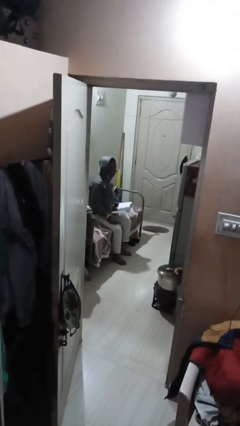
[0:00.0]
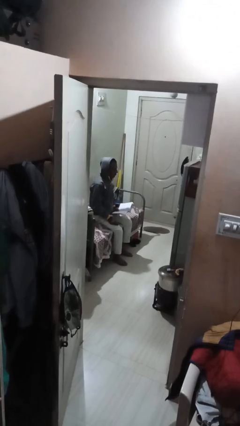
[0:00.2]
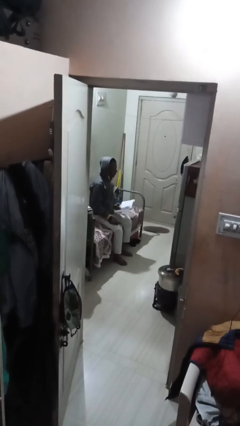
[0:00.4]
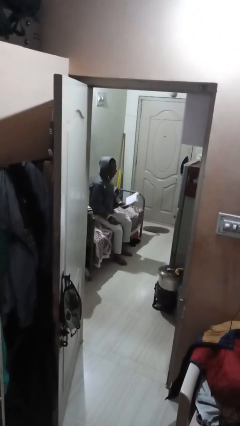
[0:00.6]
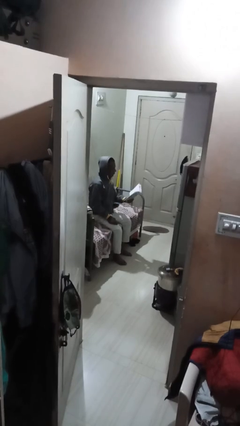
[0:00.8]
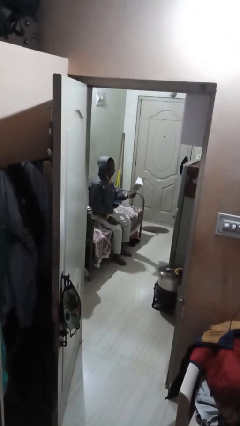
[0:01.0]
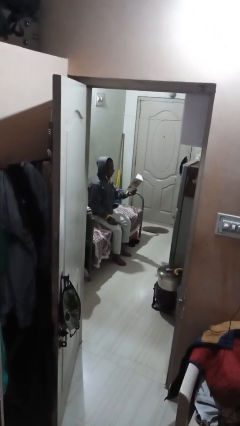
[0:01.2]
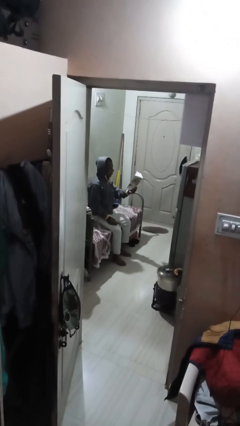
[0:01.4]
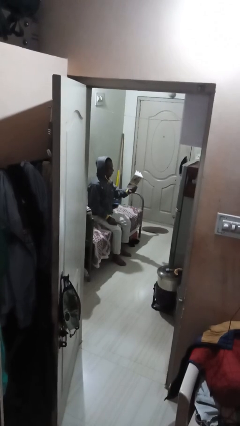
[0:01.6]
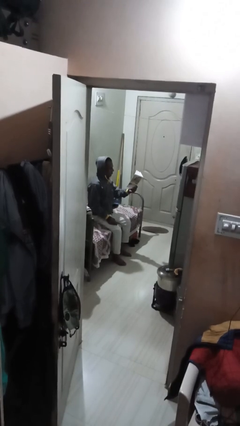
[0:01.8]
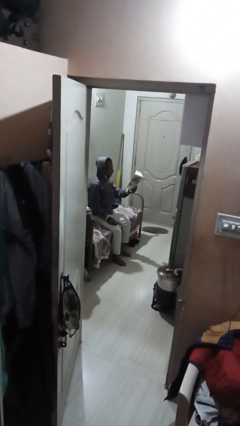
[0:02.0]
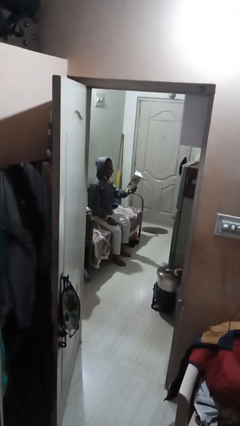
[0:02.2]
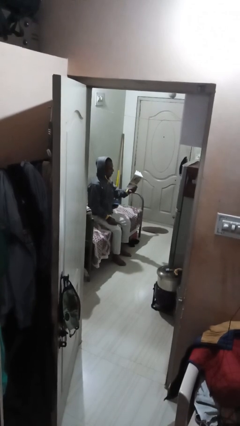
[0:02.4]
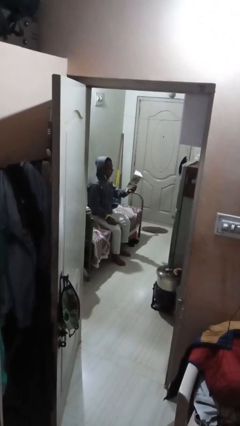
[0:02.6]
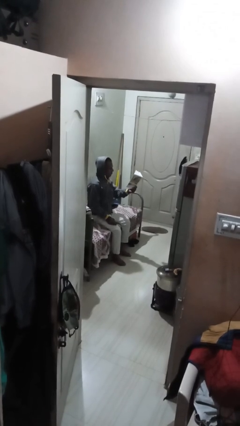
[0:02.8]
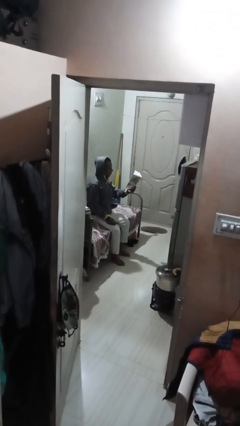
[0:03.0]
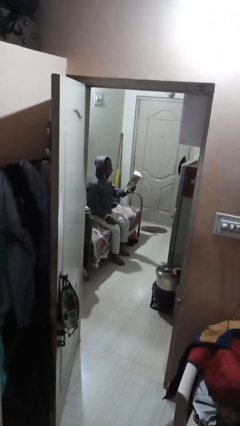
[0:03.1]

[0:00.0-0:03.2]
person reads document

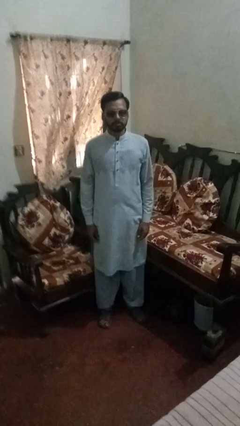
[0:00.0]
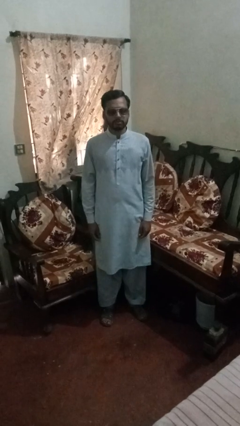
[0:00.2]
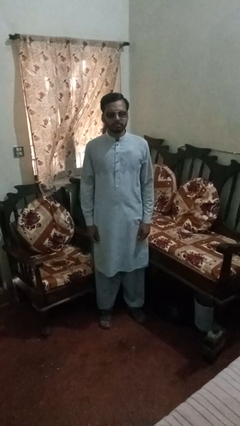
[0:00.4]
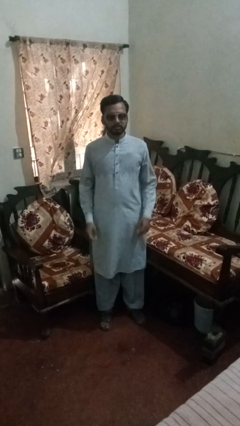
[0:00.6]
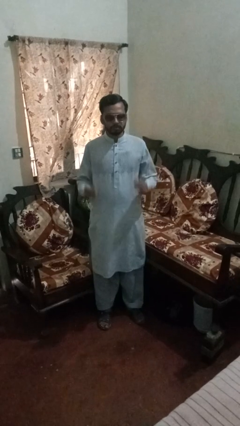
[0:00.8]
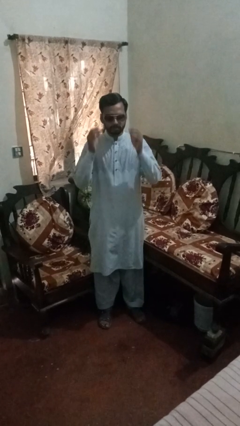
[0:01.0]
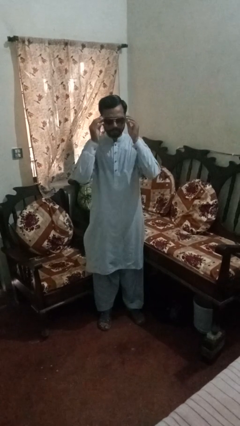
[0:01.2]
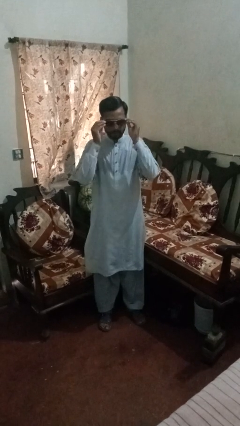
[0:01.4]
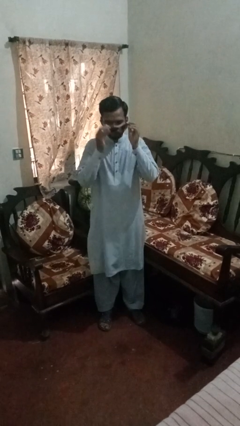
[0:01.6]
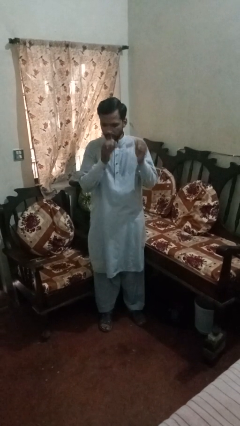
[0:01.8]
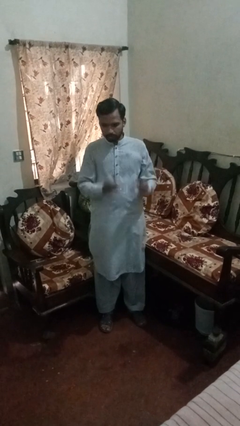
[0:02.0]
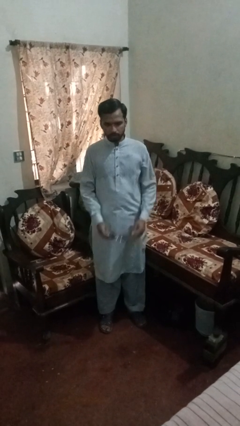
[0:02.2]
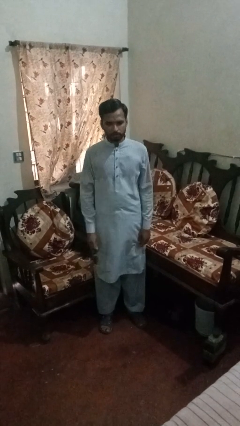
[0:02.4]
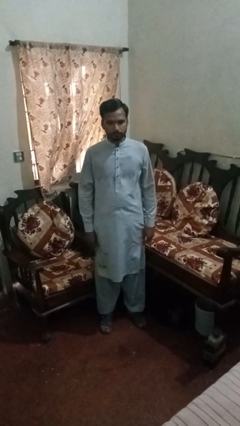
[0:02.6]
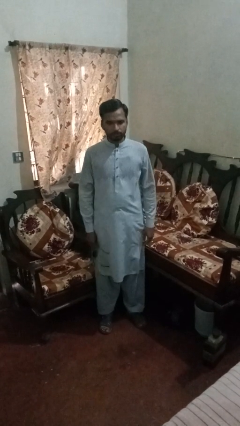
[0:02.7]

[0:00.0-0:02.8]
person takes off sunglasses

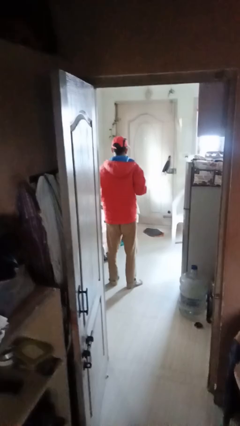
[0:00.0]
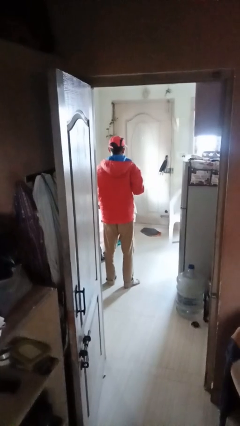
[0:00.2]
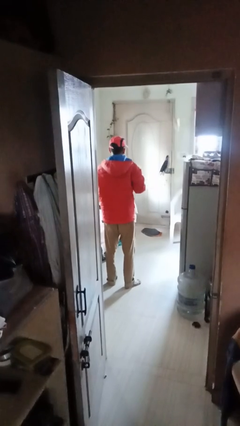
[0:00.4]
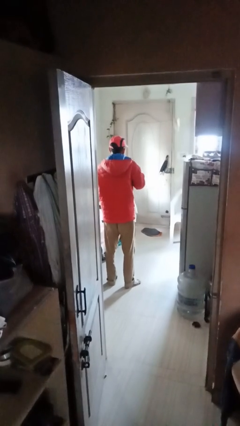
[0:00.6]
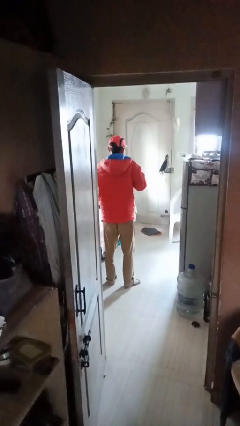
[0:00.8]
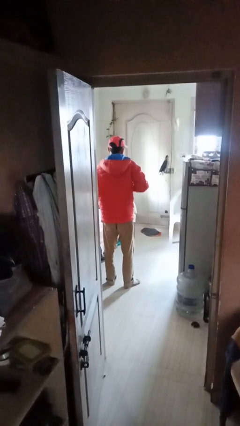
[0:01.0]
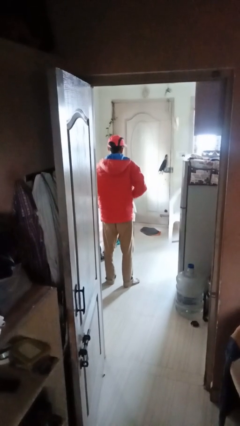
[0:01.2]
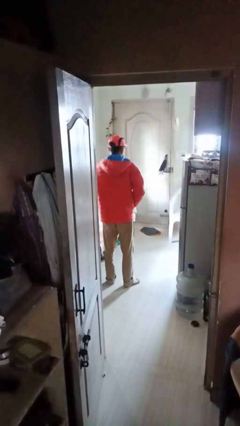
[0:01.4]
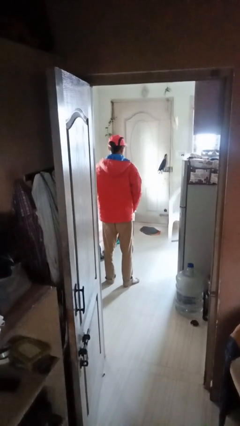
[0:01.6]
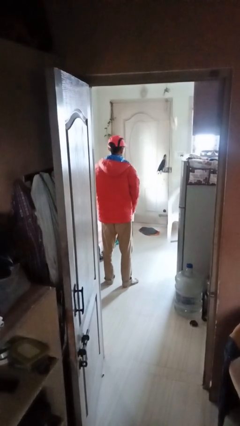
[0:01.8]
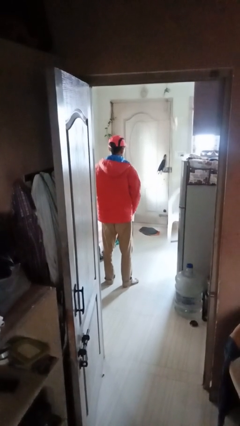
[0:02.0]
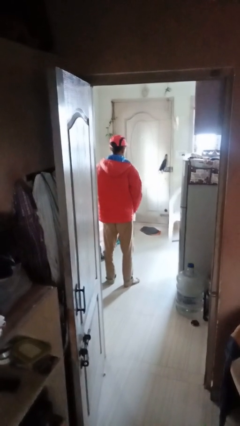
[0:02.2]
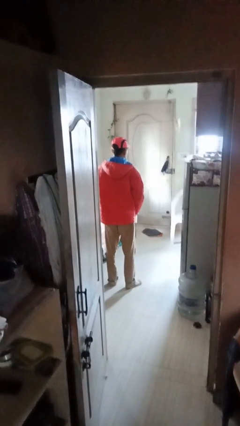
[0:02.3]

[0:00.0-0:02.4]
person unzips jacket

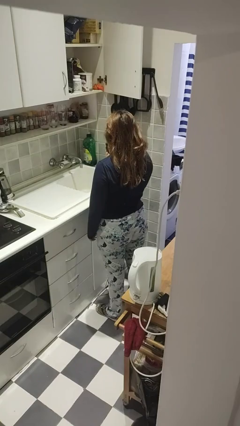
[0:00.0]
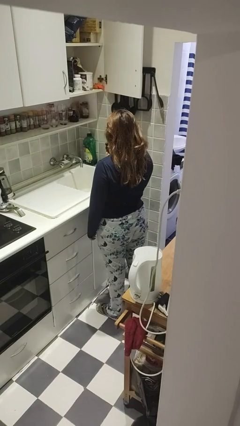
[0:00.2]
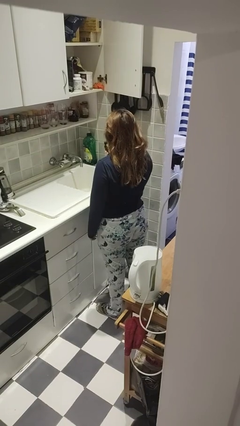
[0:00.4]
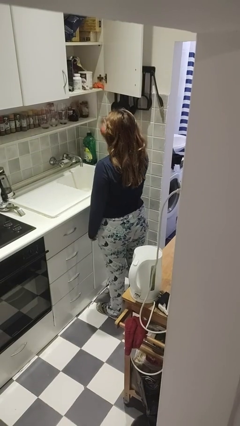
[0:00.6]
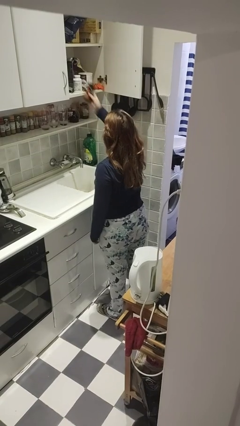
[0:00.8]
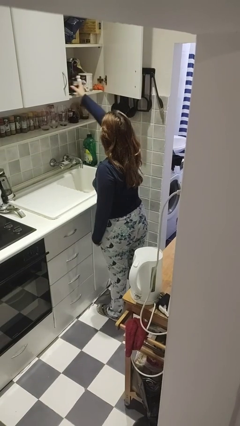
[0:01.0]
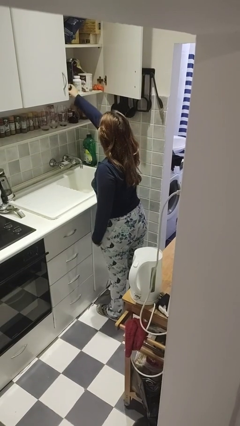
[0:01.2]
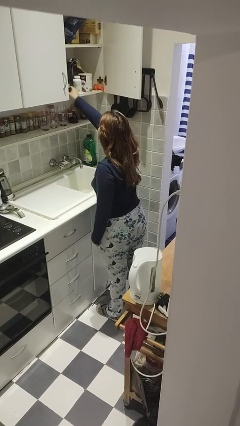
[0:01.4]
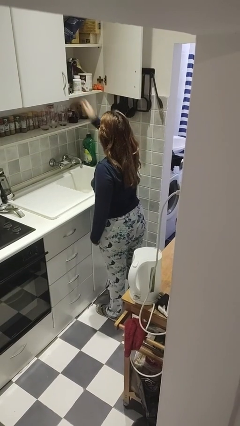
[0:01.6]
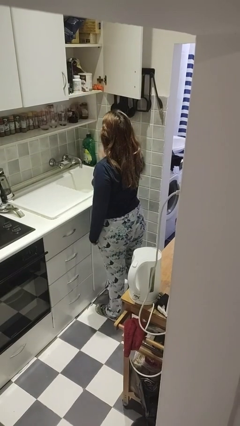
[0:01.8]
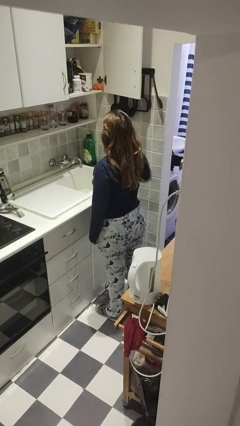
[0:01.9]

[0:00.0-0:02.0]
person puts object in cabinet

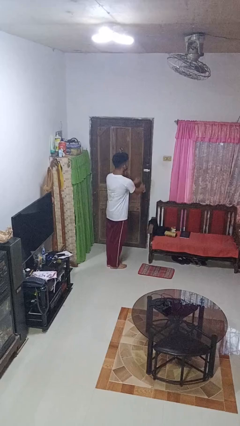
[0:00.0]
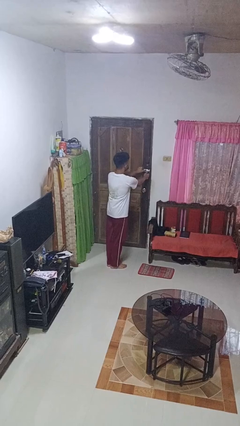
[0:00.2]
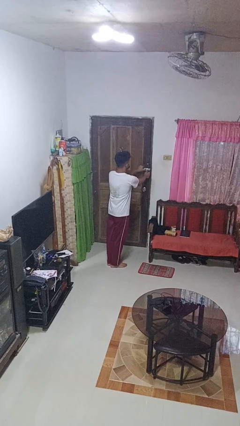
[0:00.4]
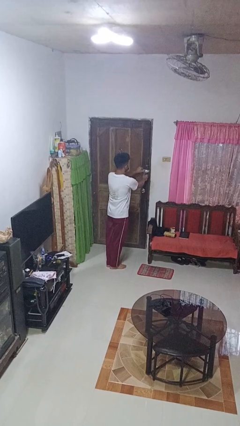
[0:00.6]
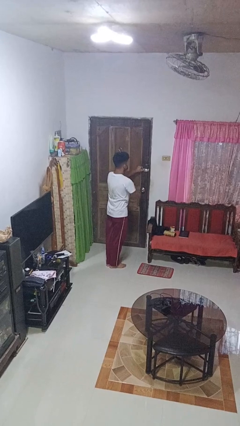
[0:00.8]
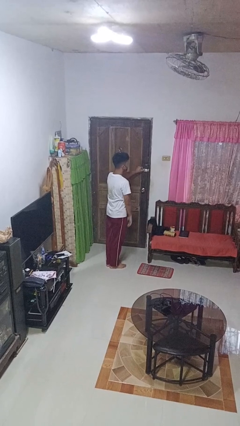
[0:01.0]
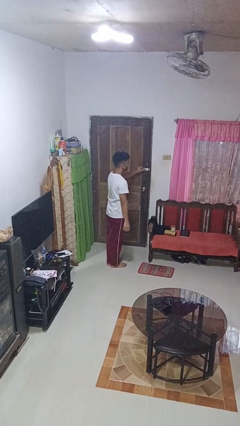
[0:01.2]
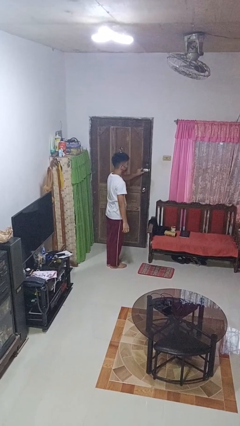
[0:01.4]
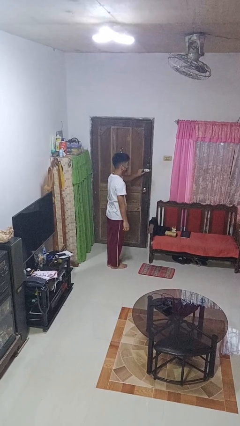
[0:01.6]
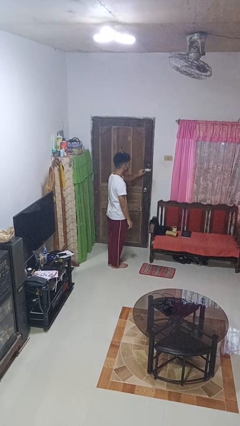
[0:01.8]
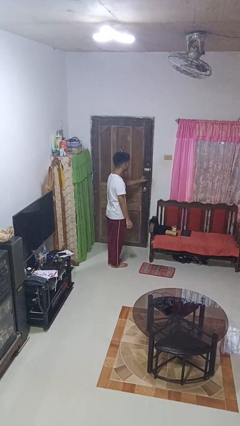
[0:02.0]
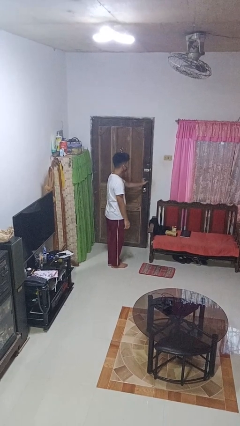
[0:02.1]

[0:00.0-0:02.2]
person unlocks door with keys

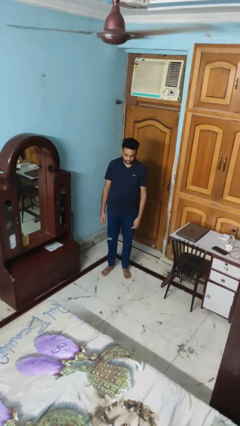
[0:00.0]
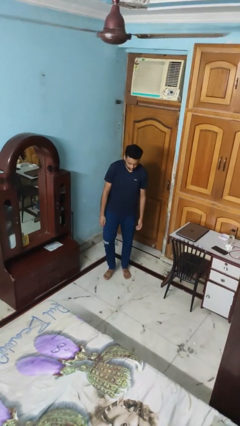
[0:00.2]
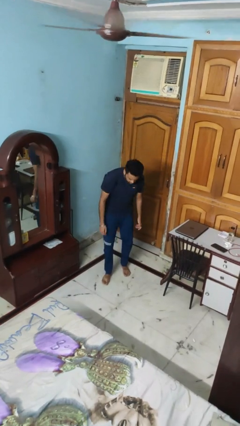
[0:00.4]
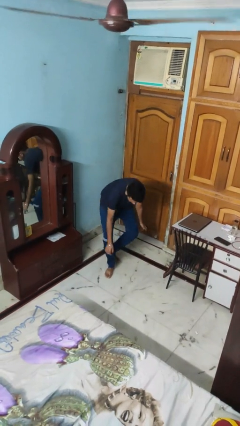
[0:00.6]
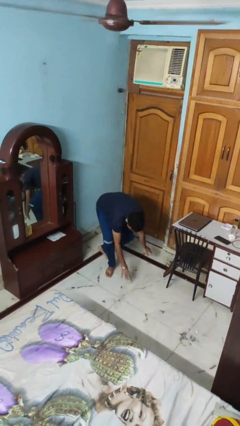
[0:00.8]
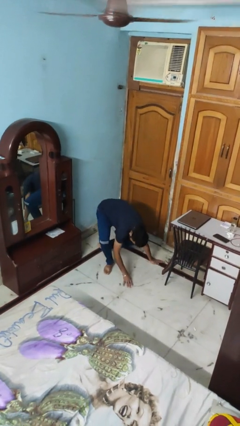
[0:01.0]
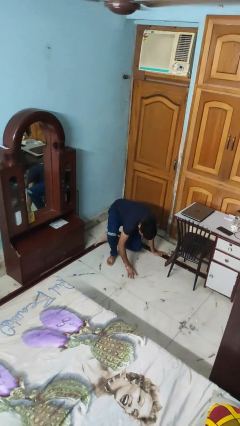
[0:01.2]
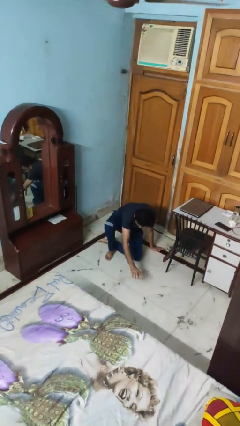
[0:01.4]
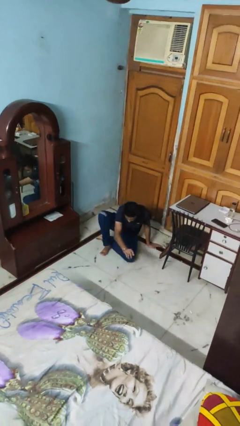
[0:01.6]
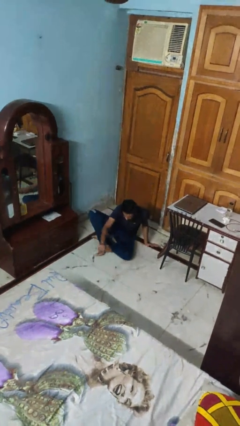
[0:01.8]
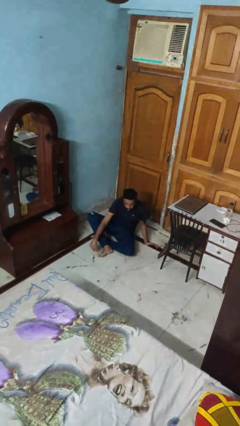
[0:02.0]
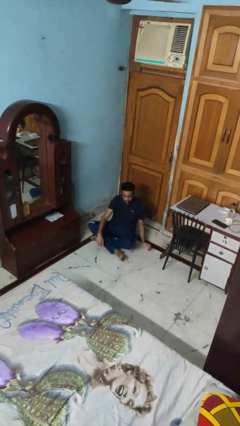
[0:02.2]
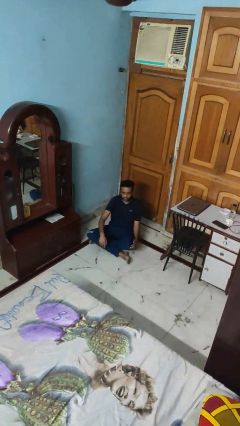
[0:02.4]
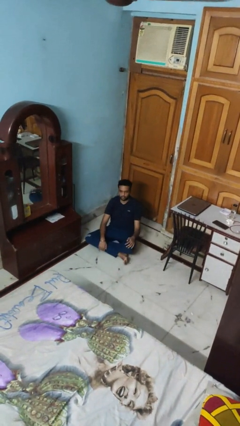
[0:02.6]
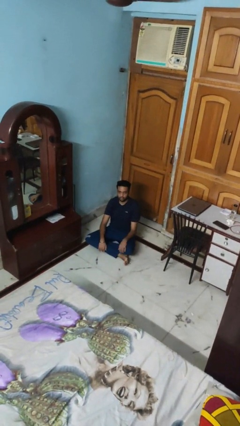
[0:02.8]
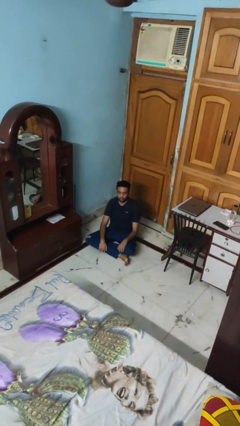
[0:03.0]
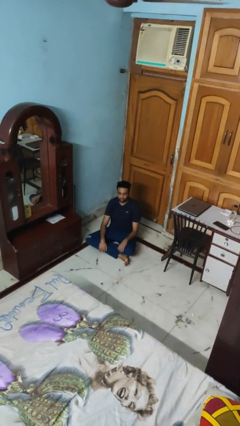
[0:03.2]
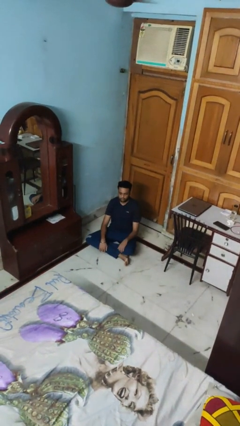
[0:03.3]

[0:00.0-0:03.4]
person sits crisscross

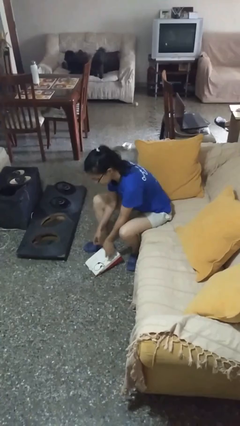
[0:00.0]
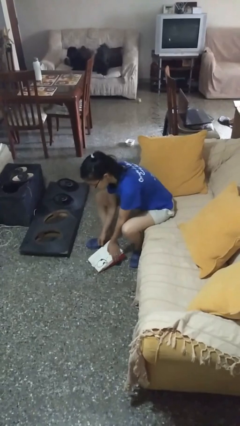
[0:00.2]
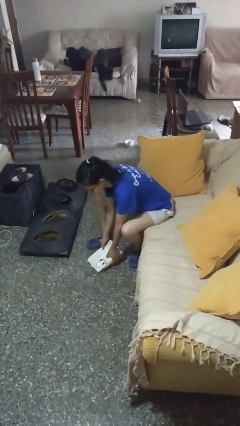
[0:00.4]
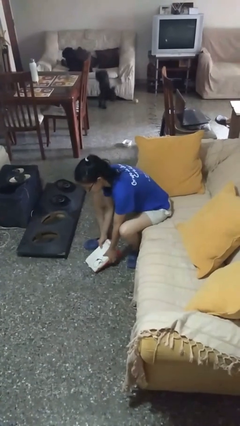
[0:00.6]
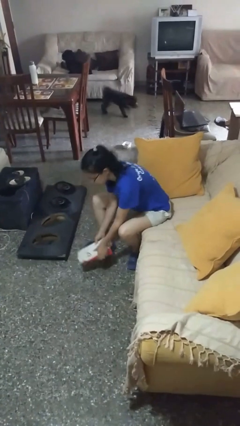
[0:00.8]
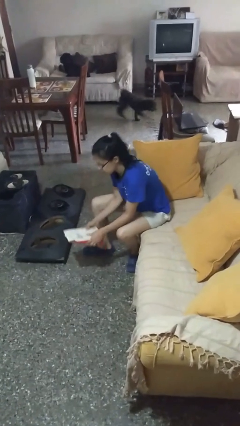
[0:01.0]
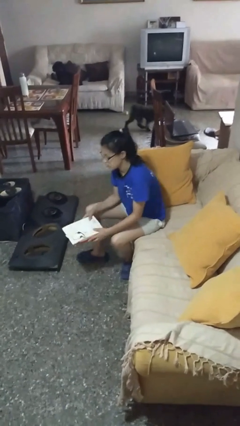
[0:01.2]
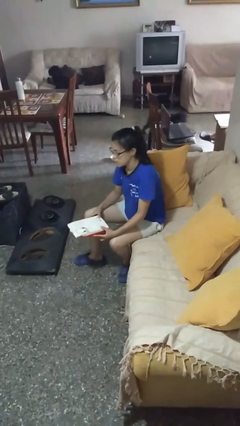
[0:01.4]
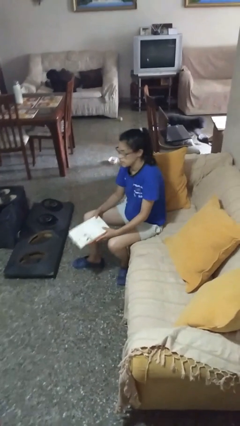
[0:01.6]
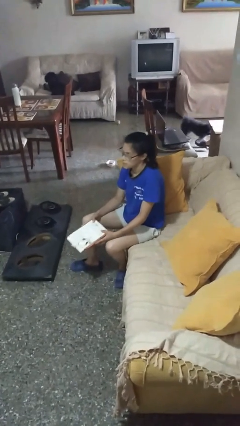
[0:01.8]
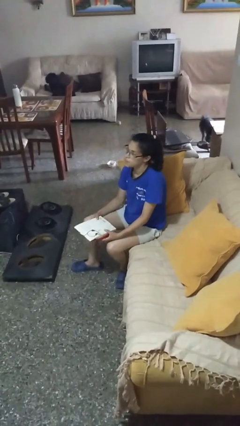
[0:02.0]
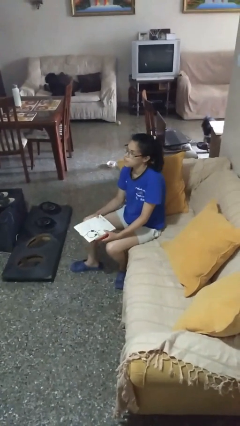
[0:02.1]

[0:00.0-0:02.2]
person picks up object from floor
